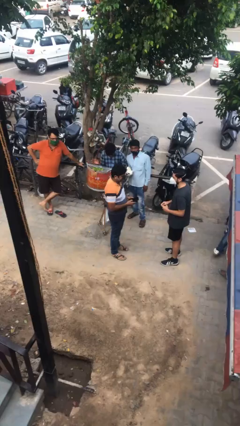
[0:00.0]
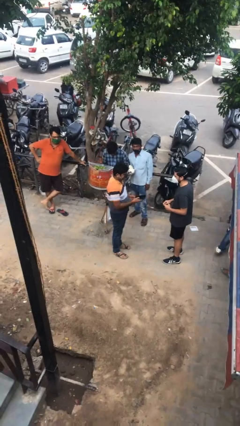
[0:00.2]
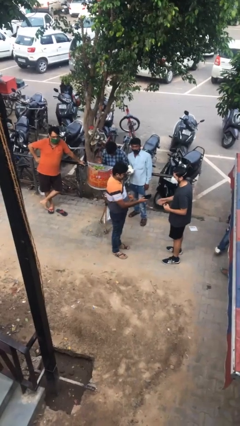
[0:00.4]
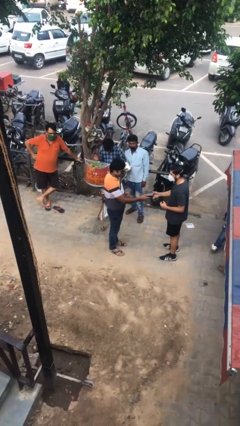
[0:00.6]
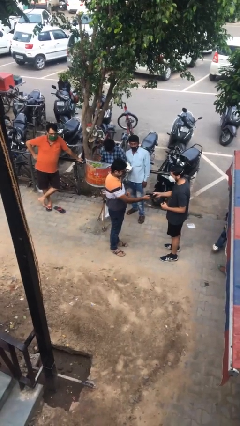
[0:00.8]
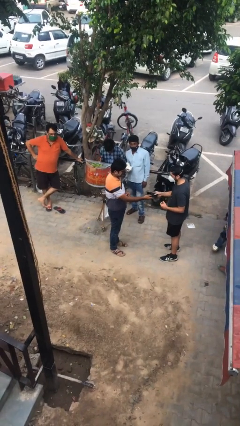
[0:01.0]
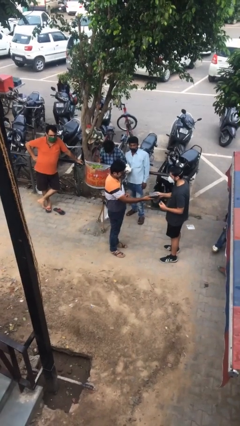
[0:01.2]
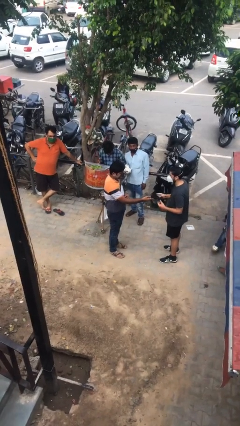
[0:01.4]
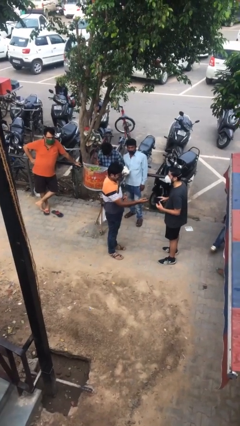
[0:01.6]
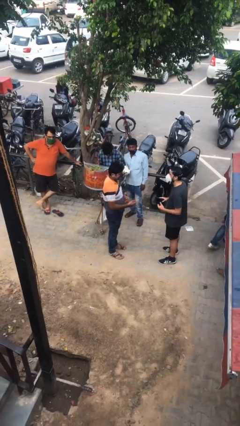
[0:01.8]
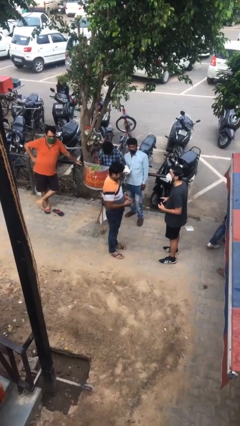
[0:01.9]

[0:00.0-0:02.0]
person transfers object to person

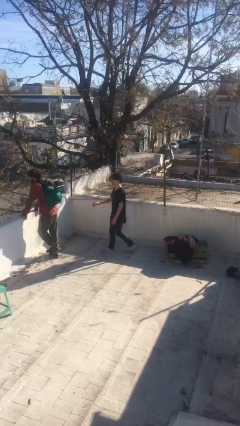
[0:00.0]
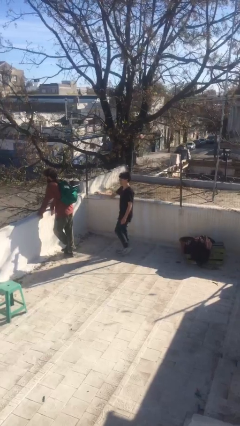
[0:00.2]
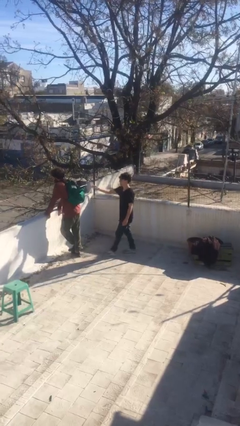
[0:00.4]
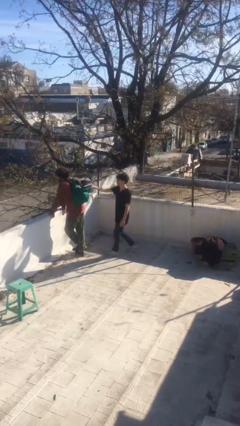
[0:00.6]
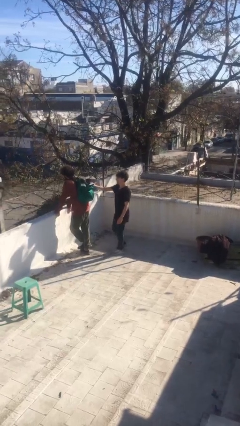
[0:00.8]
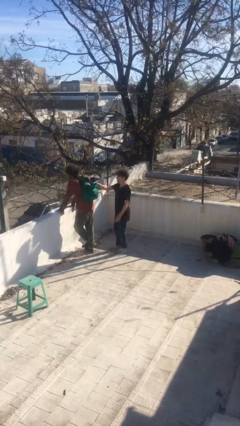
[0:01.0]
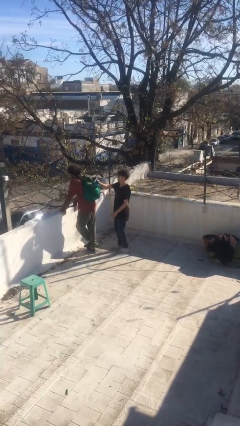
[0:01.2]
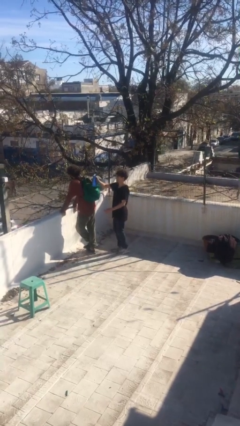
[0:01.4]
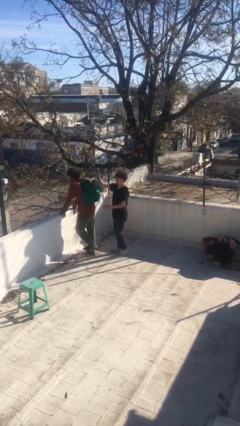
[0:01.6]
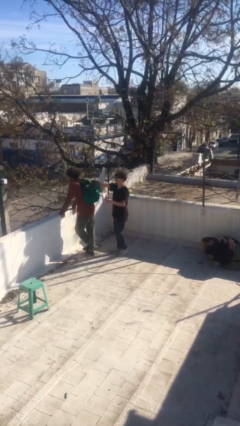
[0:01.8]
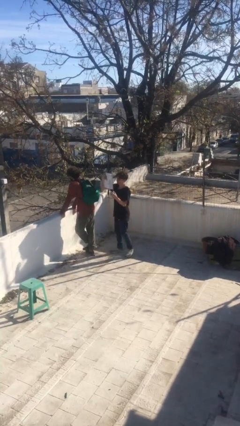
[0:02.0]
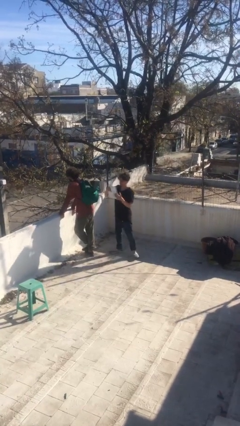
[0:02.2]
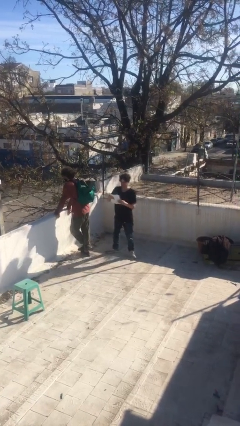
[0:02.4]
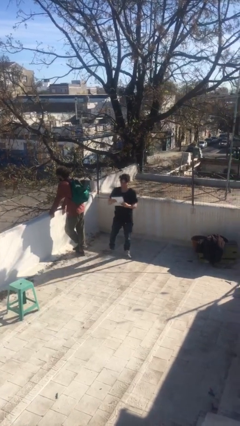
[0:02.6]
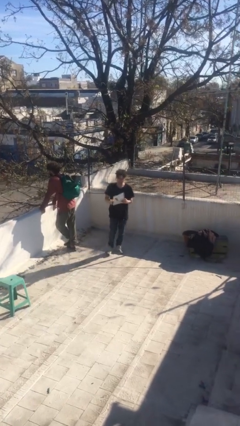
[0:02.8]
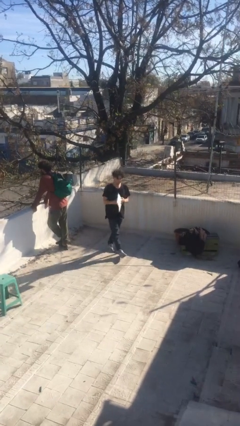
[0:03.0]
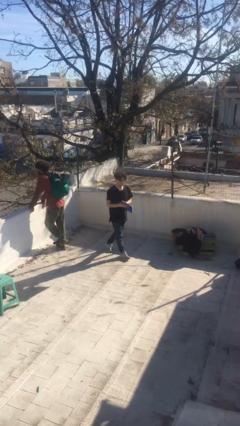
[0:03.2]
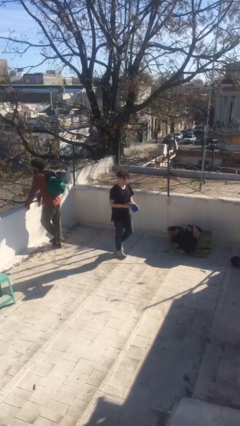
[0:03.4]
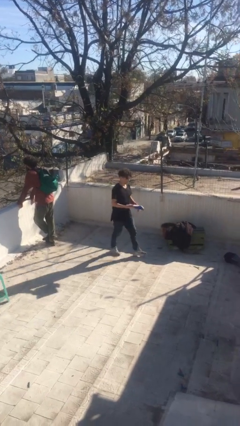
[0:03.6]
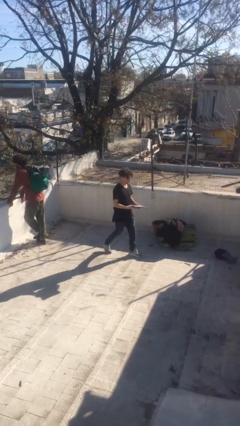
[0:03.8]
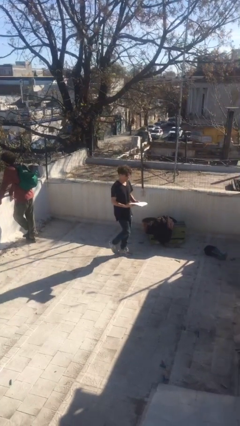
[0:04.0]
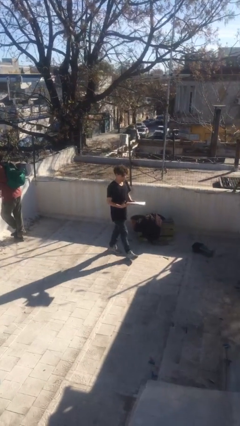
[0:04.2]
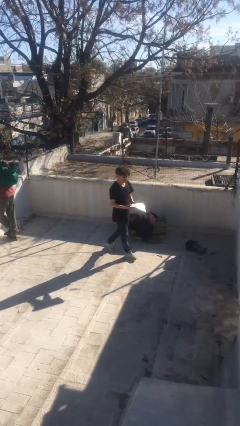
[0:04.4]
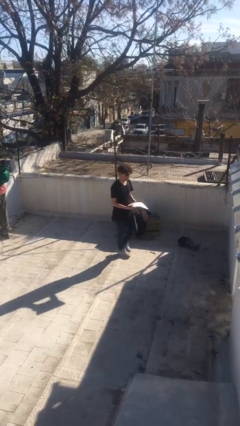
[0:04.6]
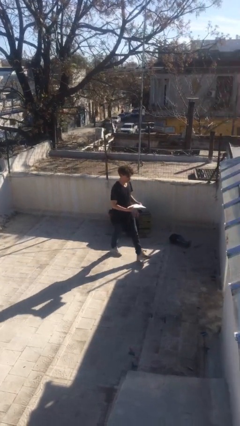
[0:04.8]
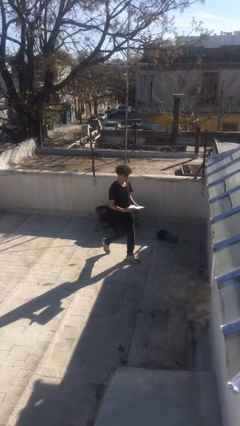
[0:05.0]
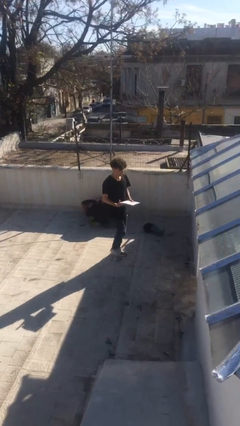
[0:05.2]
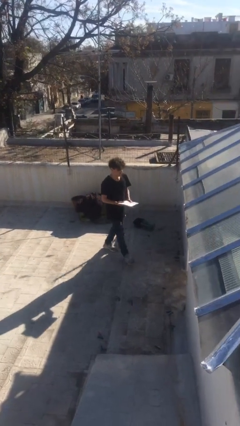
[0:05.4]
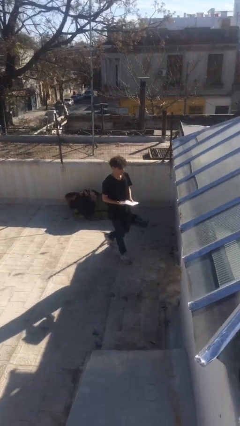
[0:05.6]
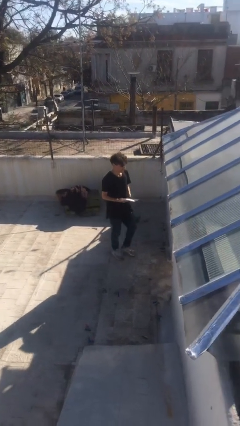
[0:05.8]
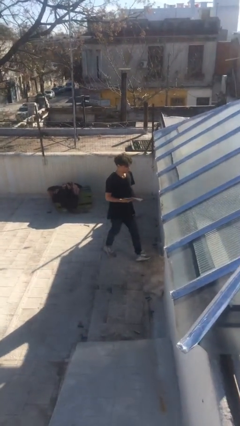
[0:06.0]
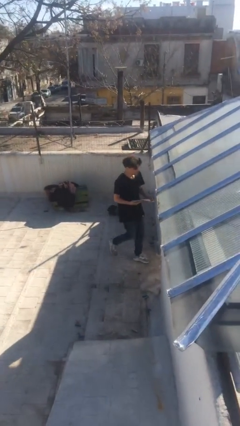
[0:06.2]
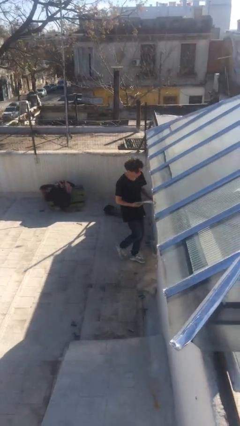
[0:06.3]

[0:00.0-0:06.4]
person steals object from person

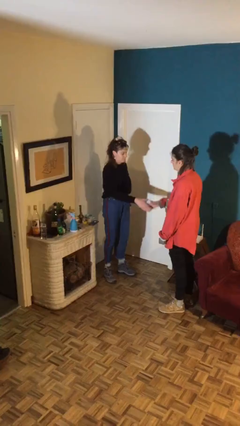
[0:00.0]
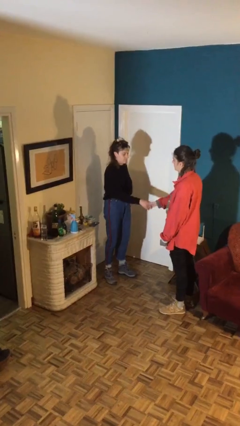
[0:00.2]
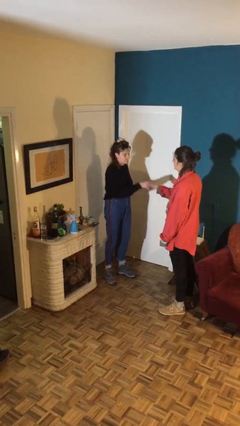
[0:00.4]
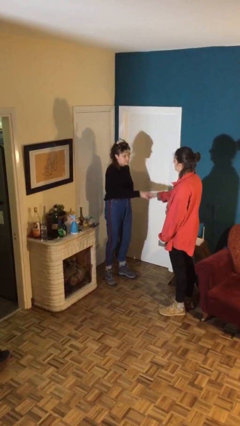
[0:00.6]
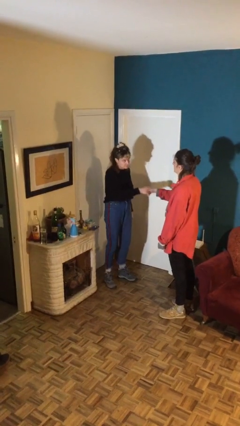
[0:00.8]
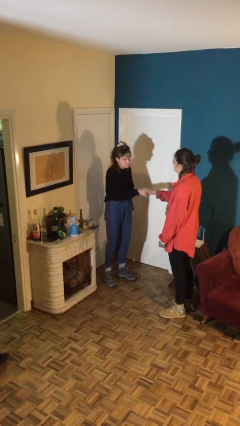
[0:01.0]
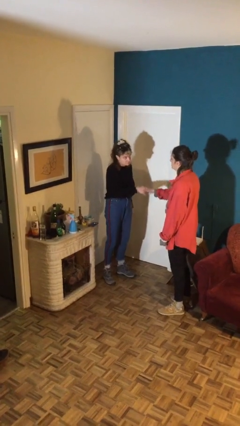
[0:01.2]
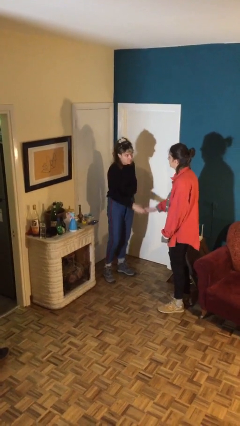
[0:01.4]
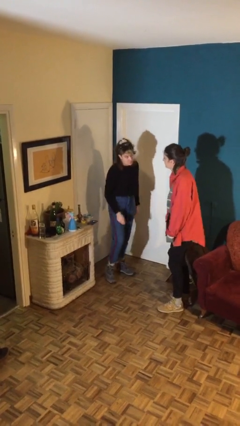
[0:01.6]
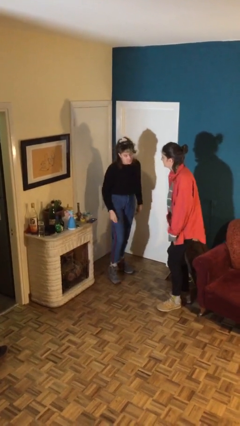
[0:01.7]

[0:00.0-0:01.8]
person shakes hand

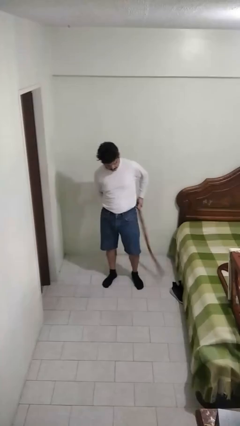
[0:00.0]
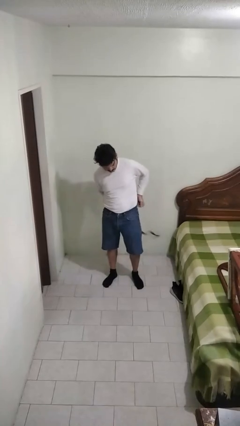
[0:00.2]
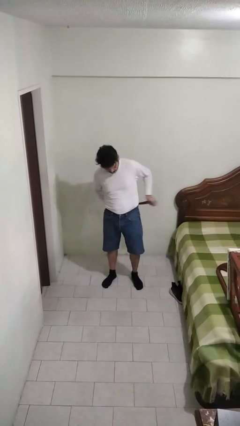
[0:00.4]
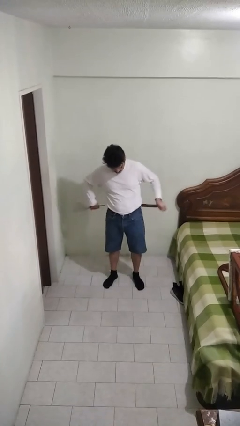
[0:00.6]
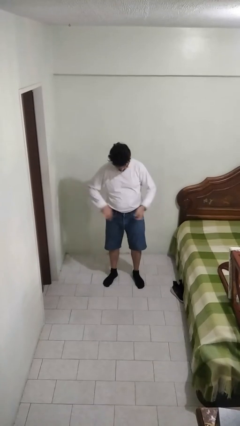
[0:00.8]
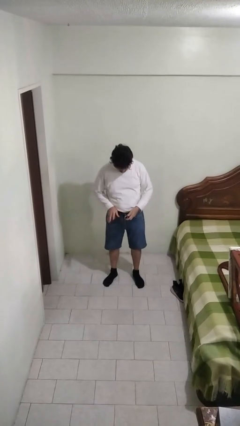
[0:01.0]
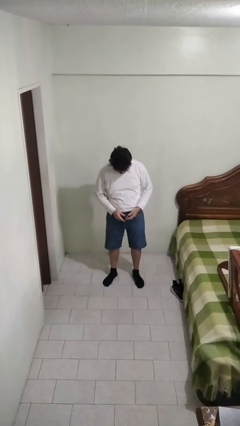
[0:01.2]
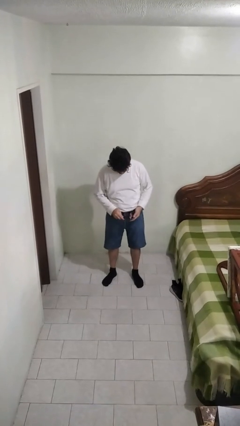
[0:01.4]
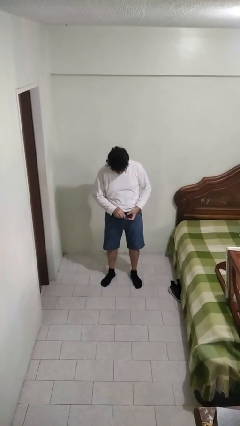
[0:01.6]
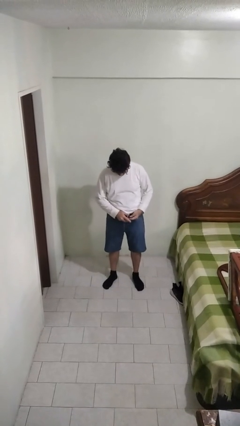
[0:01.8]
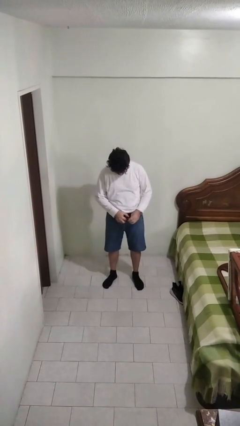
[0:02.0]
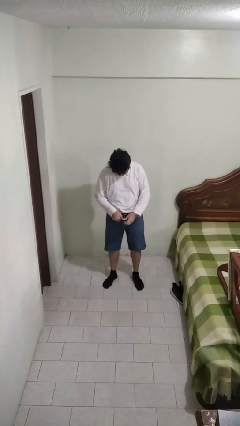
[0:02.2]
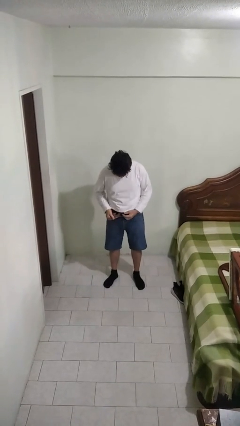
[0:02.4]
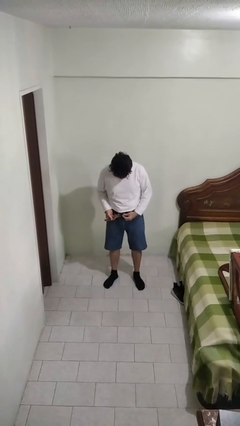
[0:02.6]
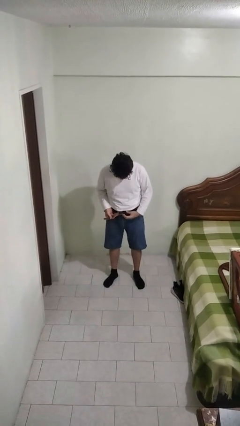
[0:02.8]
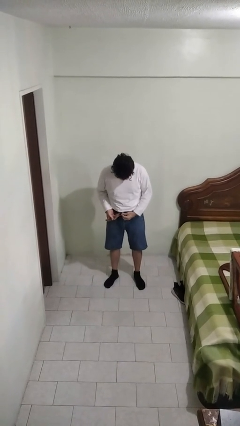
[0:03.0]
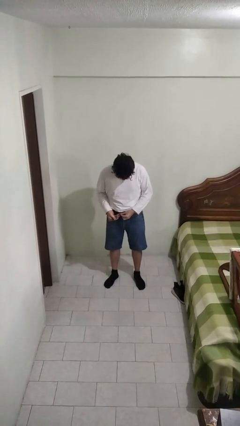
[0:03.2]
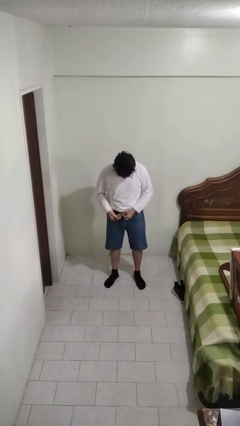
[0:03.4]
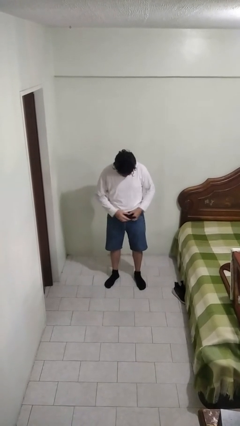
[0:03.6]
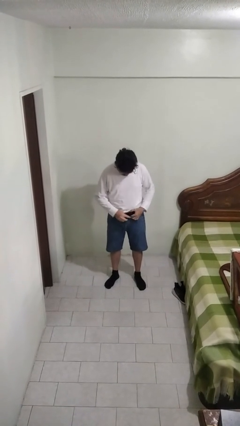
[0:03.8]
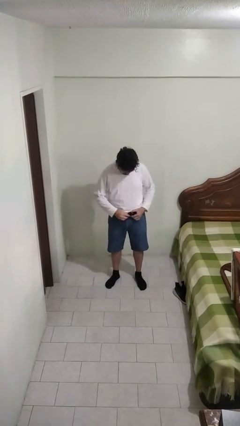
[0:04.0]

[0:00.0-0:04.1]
person puts on belt

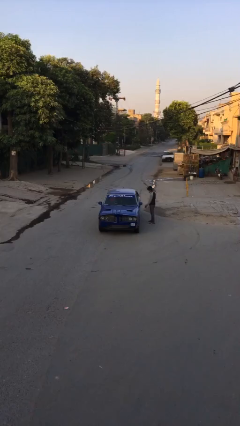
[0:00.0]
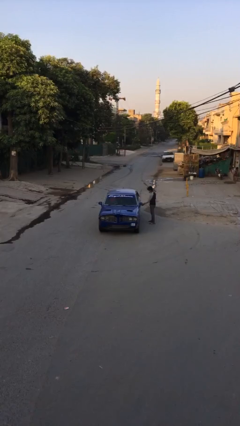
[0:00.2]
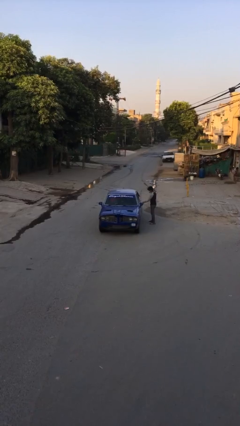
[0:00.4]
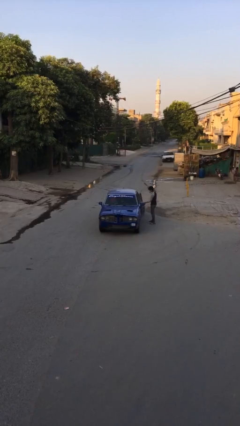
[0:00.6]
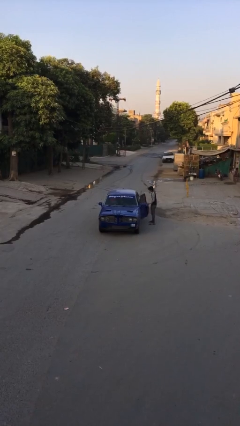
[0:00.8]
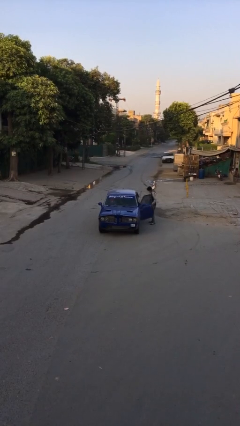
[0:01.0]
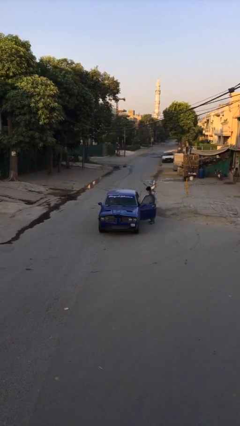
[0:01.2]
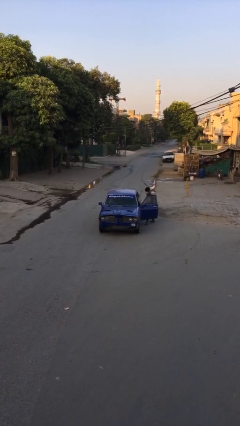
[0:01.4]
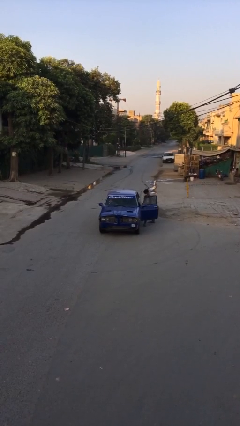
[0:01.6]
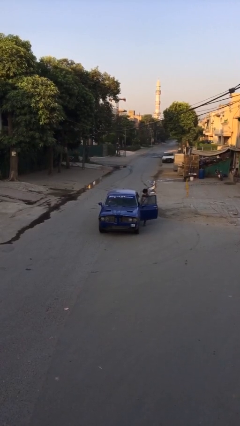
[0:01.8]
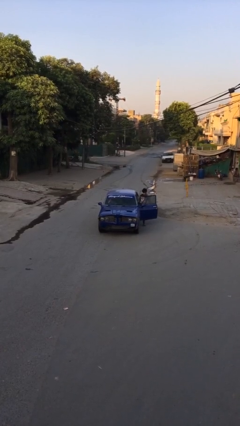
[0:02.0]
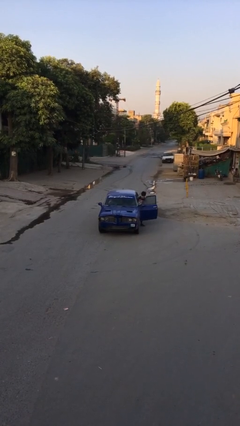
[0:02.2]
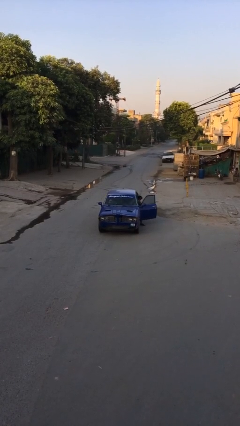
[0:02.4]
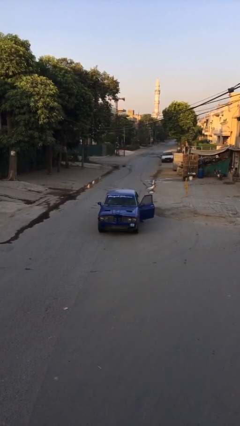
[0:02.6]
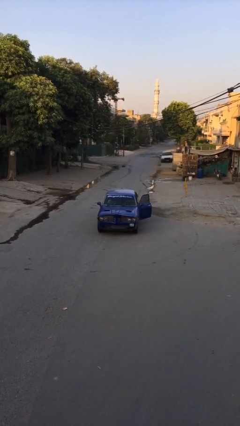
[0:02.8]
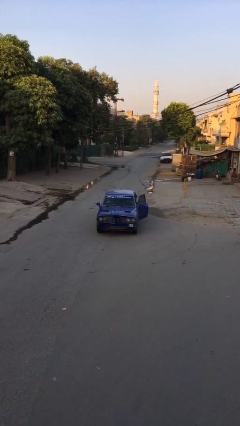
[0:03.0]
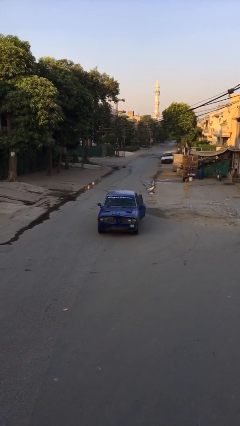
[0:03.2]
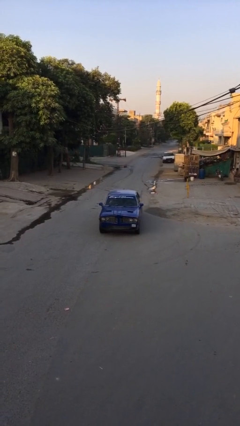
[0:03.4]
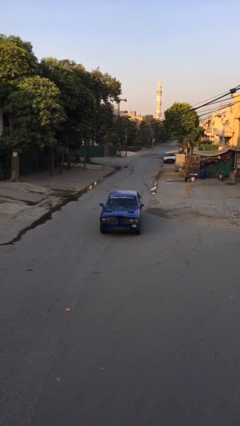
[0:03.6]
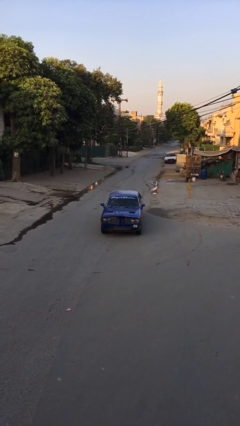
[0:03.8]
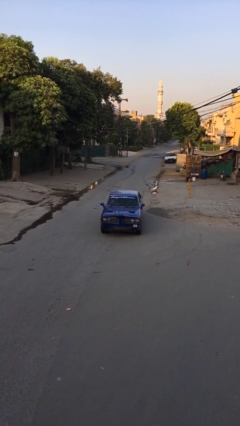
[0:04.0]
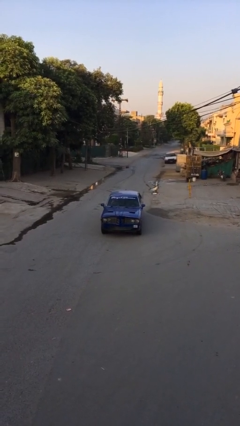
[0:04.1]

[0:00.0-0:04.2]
car picks up person
